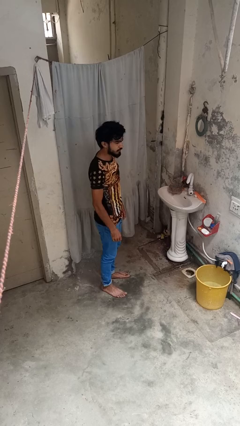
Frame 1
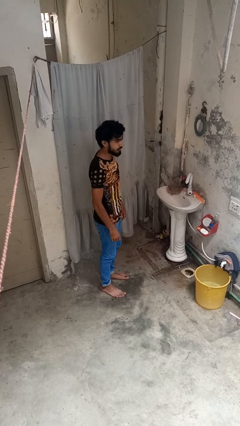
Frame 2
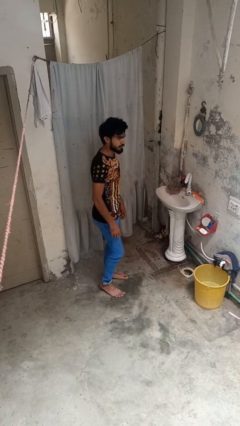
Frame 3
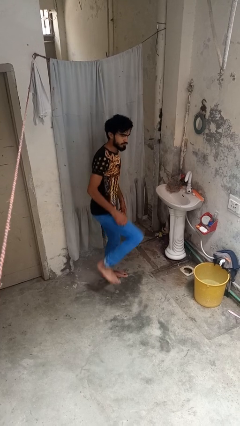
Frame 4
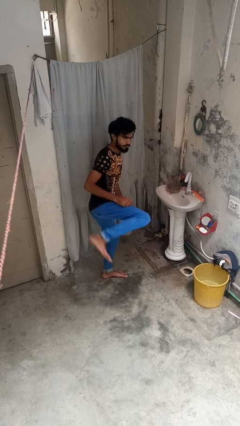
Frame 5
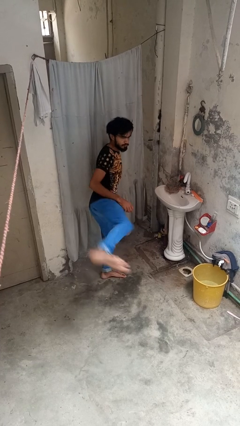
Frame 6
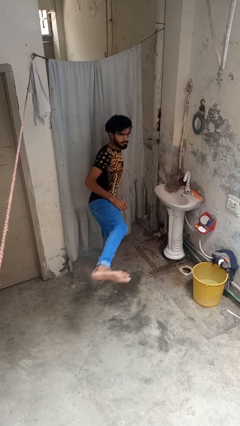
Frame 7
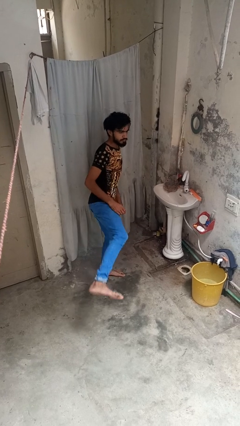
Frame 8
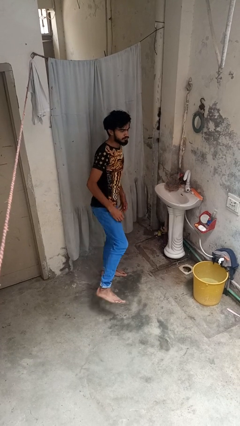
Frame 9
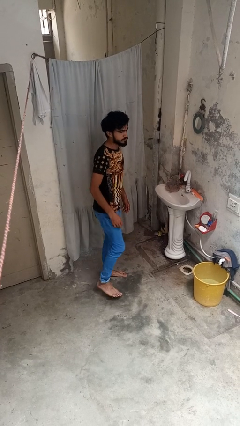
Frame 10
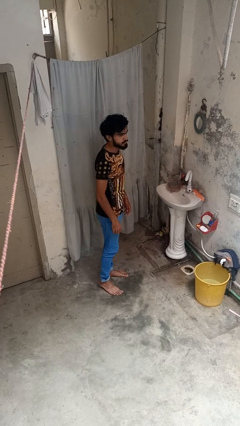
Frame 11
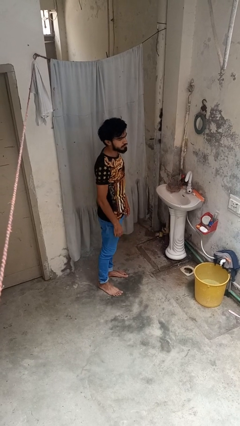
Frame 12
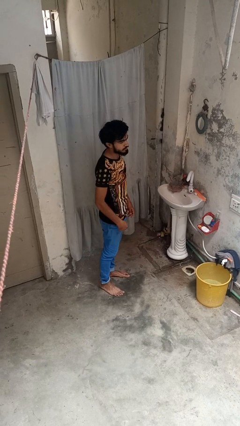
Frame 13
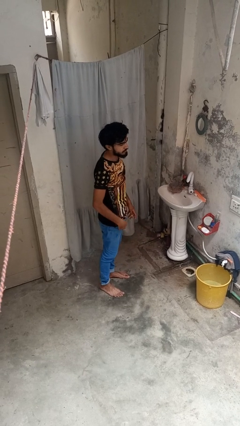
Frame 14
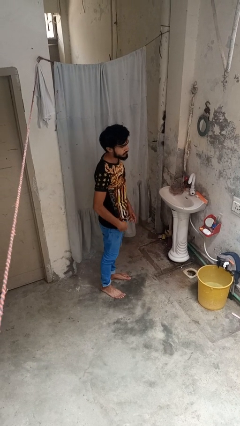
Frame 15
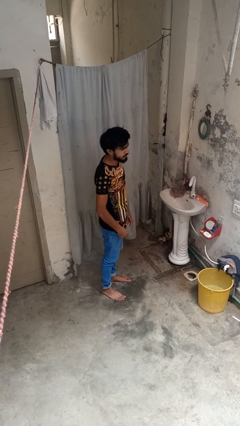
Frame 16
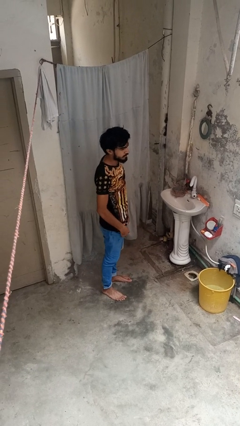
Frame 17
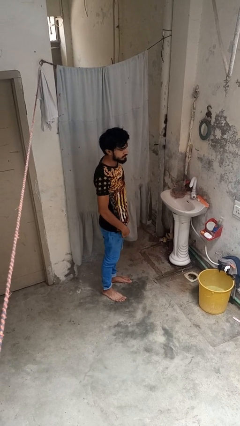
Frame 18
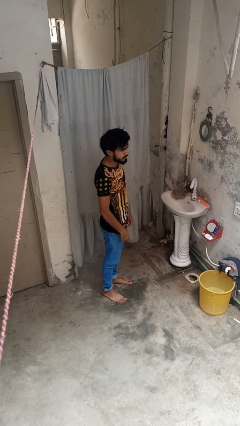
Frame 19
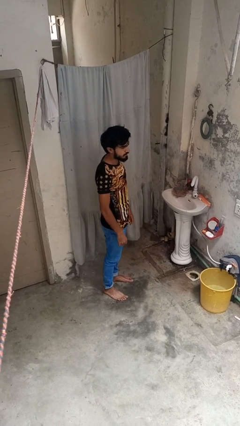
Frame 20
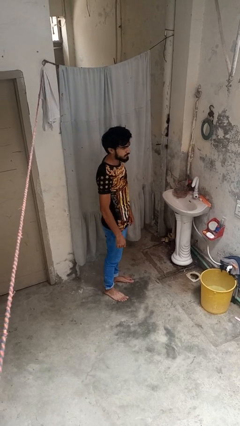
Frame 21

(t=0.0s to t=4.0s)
person karate kicks

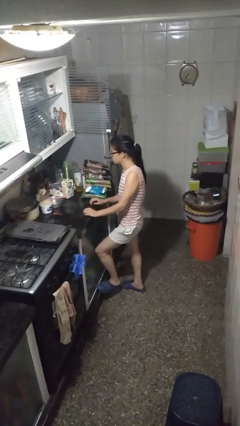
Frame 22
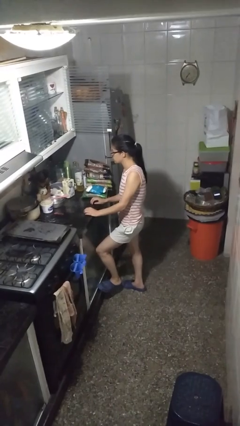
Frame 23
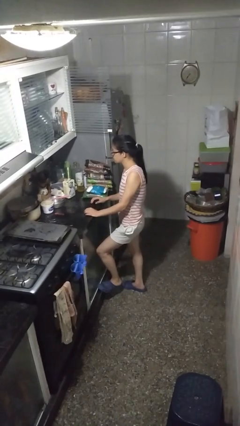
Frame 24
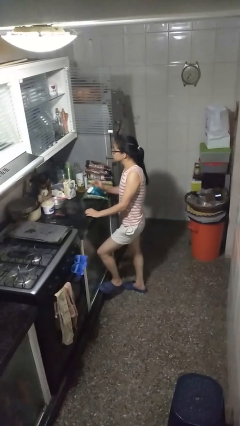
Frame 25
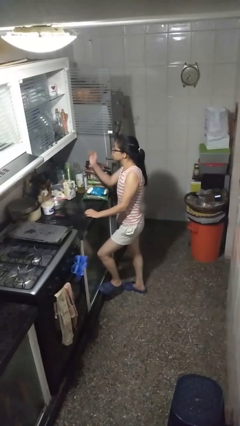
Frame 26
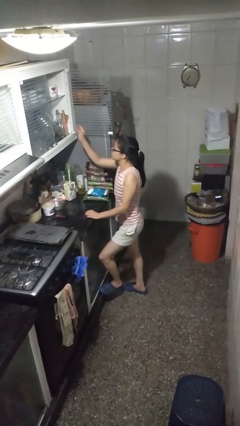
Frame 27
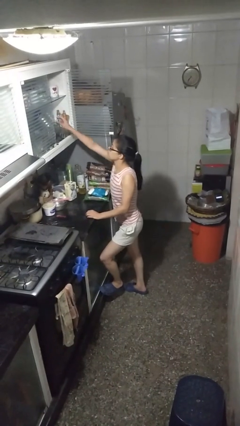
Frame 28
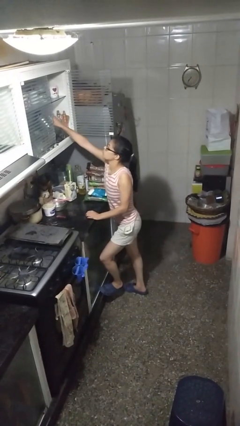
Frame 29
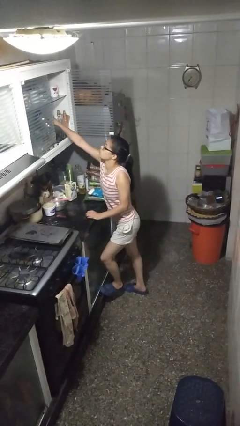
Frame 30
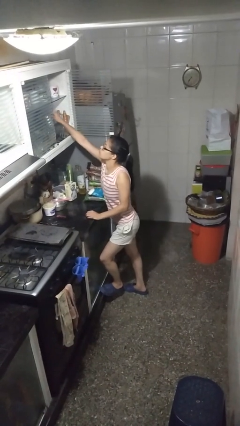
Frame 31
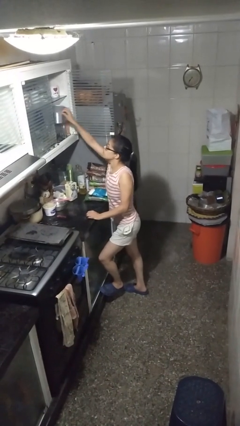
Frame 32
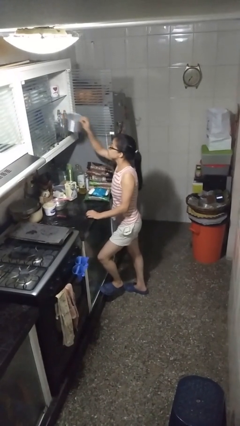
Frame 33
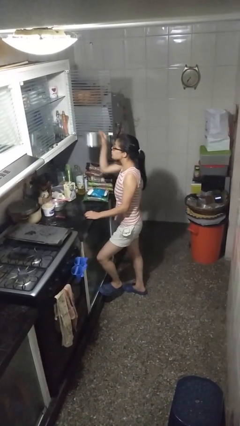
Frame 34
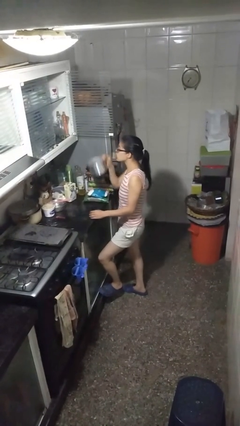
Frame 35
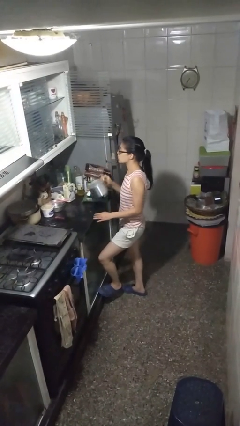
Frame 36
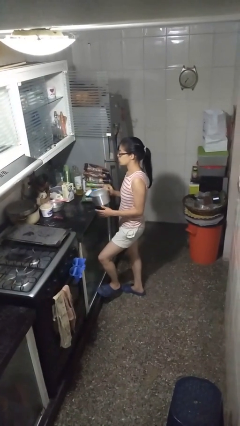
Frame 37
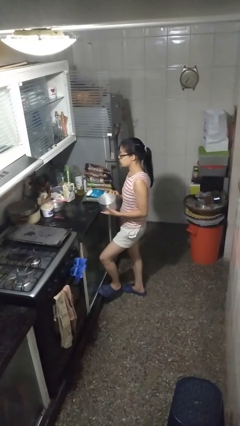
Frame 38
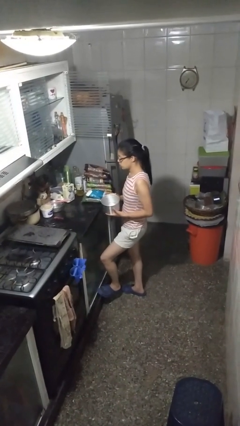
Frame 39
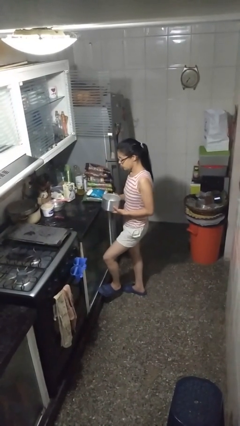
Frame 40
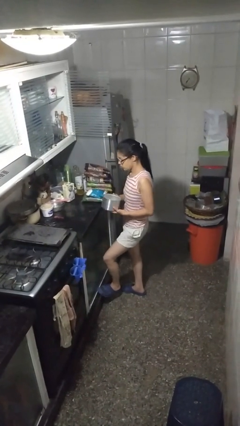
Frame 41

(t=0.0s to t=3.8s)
person picks up object from cabinet

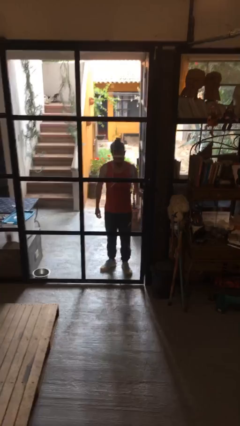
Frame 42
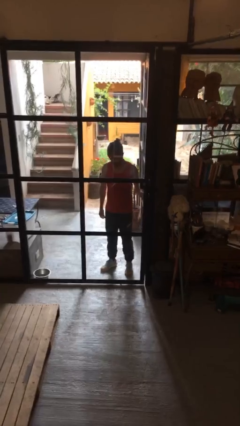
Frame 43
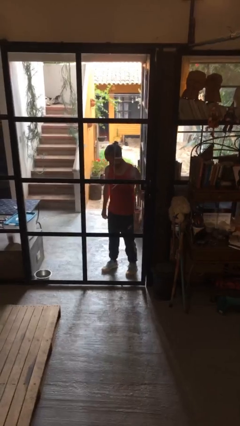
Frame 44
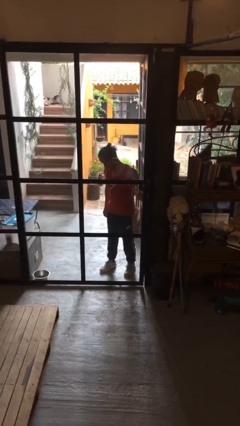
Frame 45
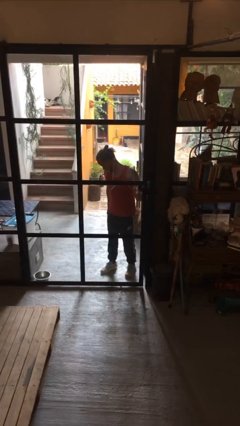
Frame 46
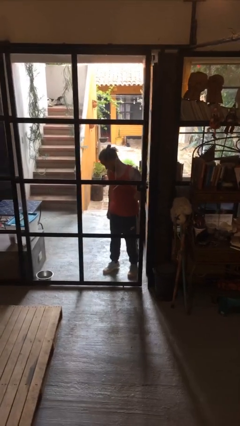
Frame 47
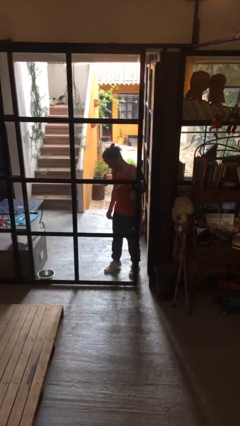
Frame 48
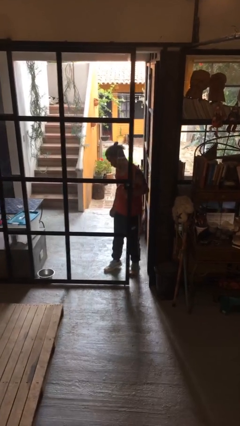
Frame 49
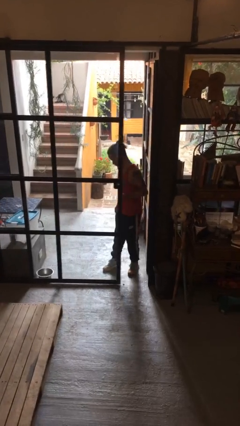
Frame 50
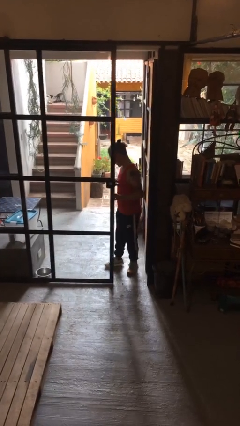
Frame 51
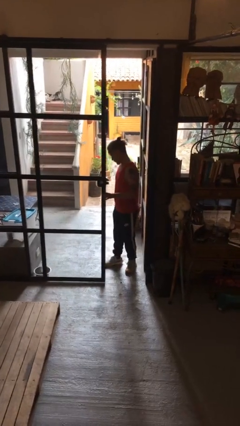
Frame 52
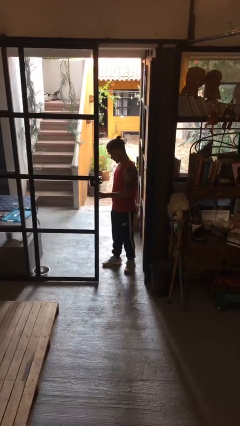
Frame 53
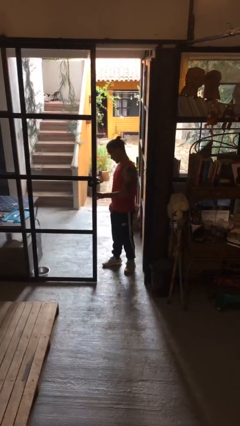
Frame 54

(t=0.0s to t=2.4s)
person opens sliding door

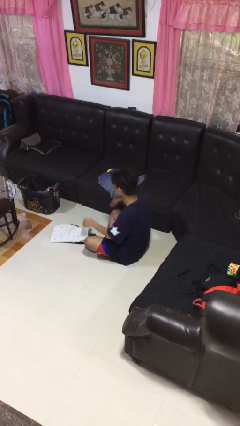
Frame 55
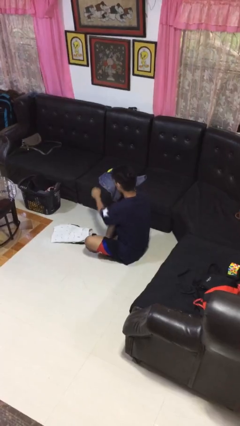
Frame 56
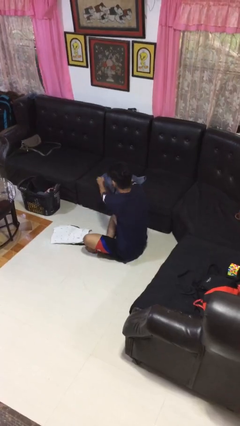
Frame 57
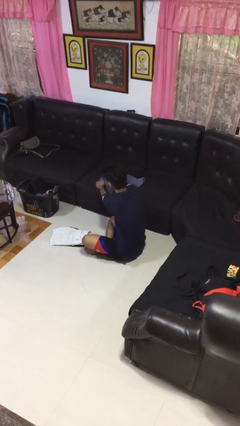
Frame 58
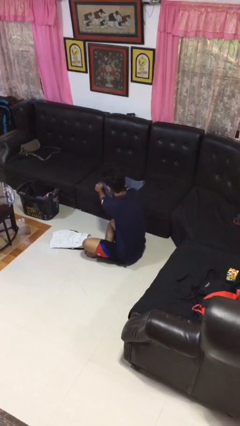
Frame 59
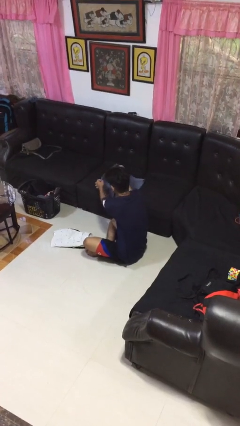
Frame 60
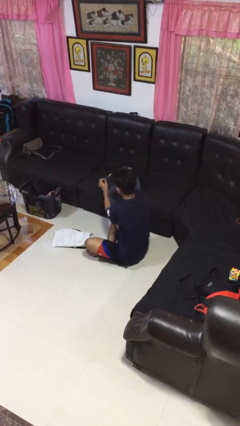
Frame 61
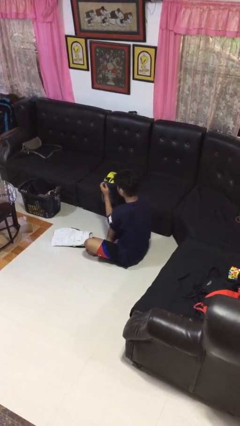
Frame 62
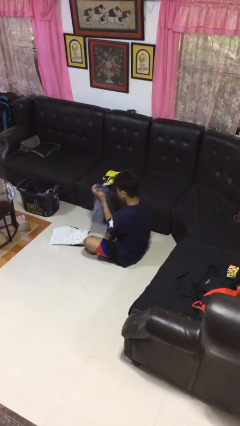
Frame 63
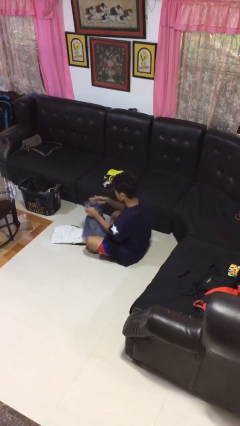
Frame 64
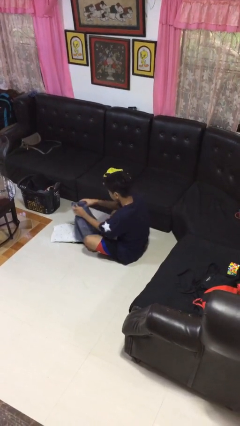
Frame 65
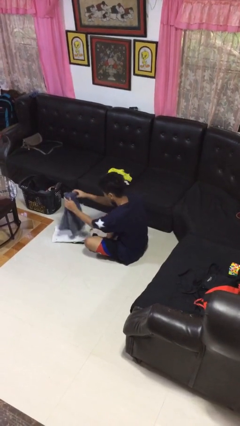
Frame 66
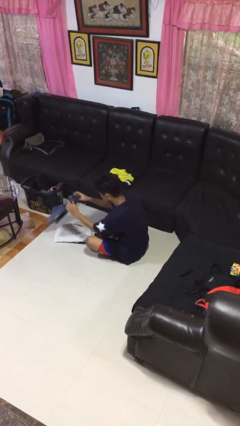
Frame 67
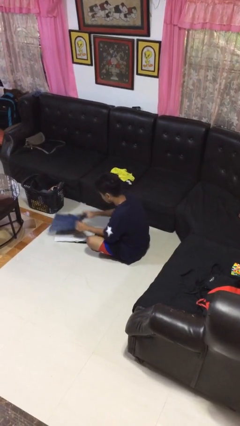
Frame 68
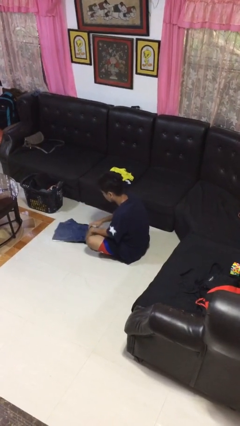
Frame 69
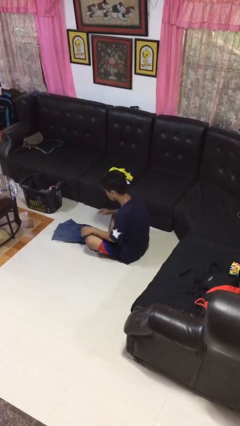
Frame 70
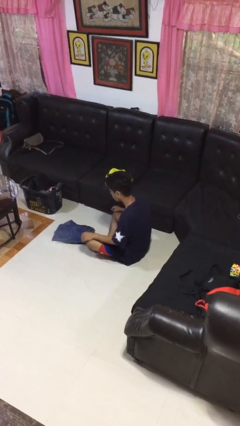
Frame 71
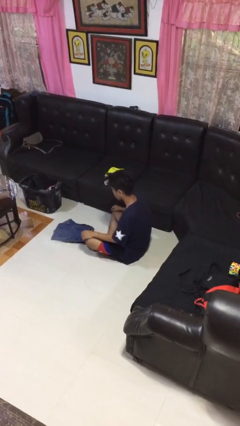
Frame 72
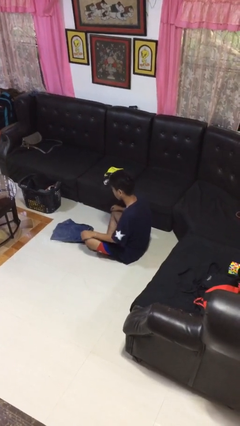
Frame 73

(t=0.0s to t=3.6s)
person folds pants

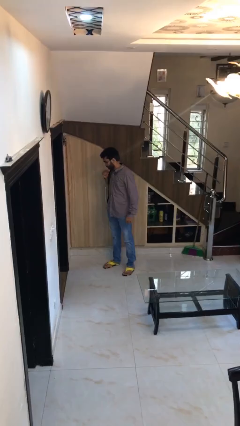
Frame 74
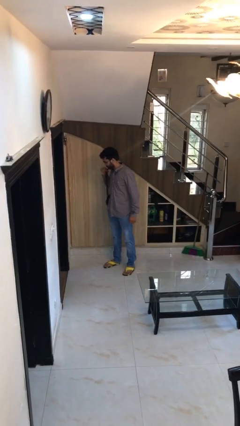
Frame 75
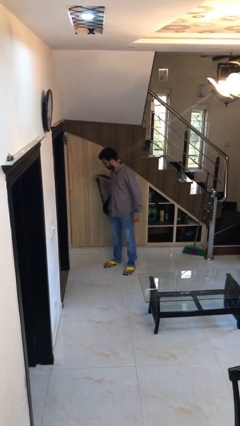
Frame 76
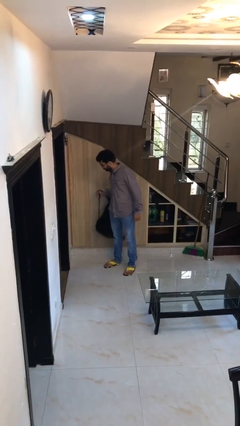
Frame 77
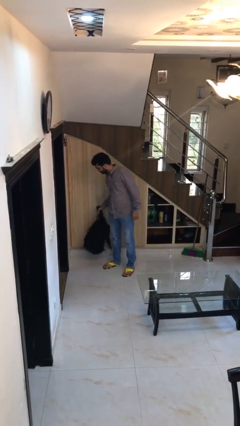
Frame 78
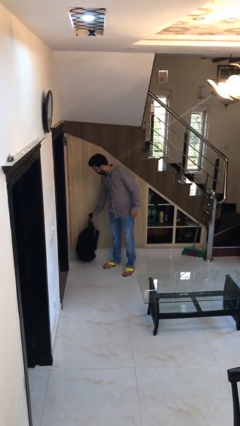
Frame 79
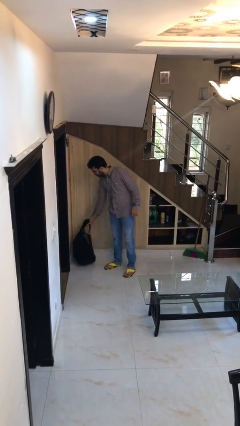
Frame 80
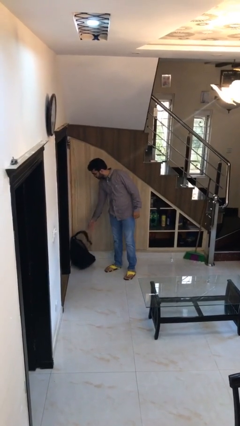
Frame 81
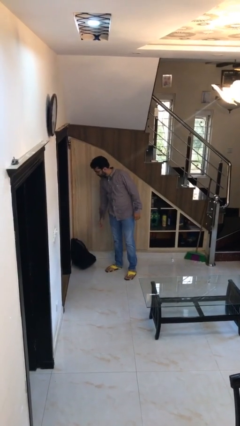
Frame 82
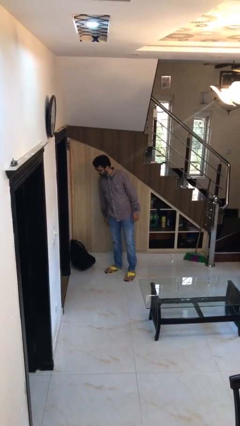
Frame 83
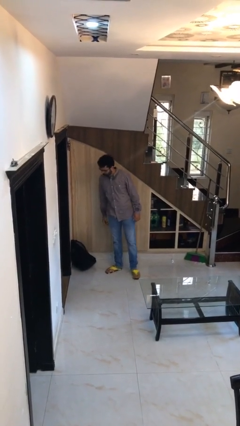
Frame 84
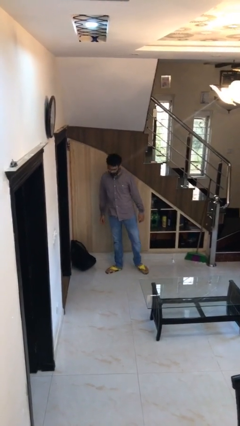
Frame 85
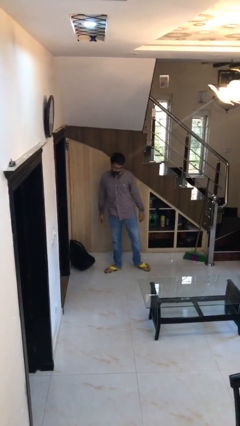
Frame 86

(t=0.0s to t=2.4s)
person puts down object on floor

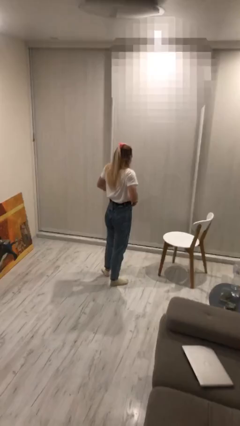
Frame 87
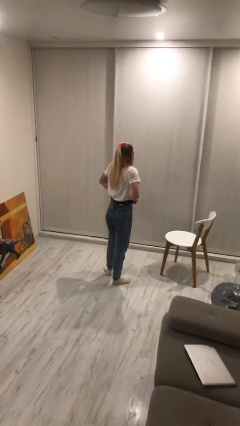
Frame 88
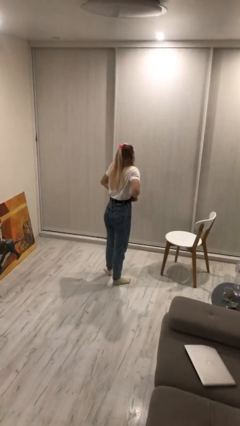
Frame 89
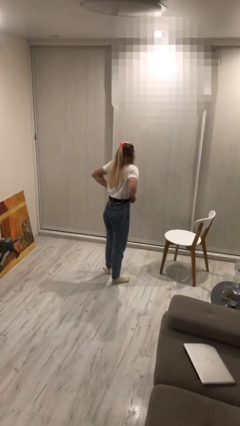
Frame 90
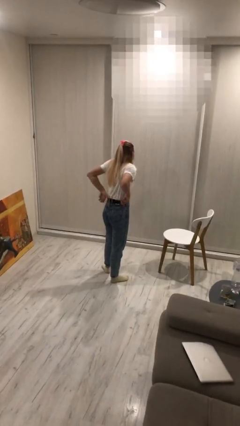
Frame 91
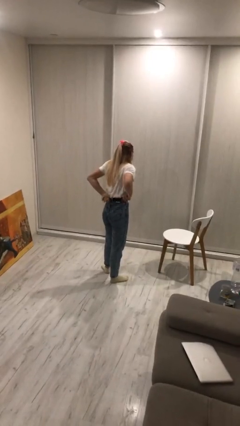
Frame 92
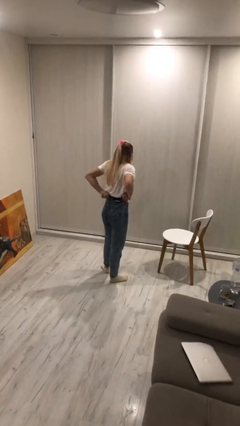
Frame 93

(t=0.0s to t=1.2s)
person hikes up pants
